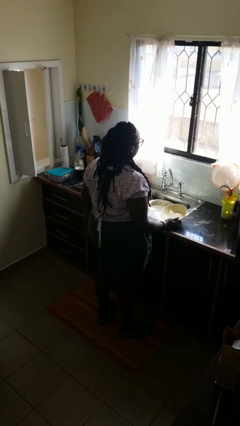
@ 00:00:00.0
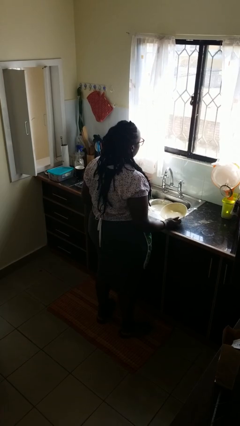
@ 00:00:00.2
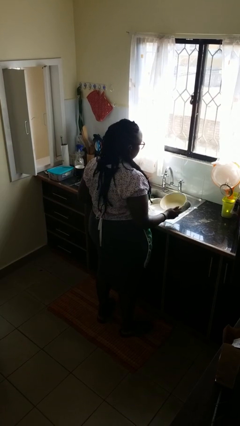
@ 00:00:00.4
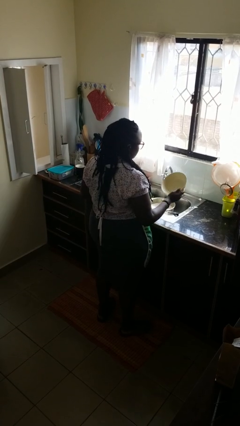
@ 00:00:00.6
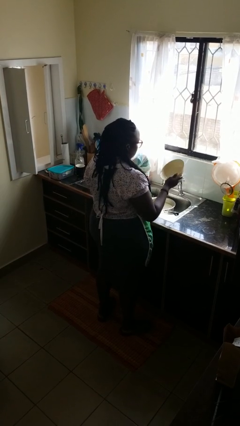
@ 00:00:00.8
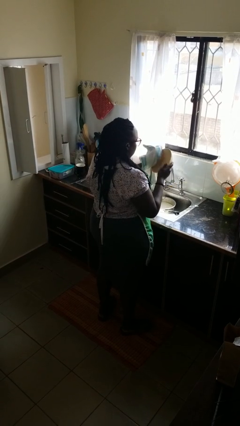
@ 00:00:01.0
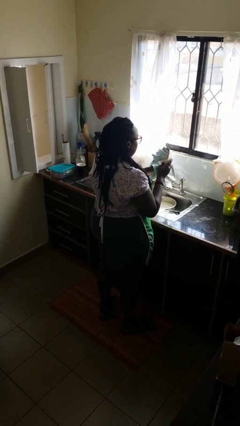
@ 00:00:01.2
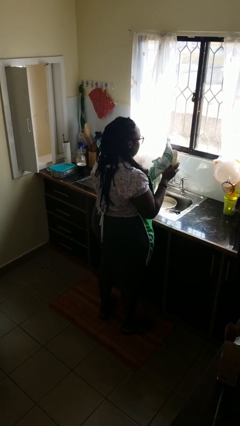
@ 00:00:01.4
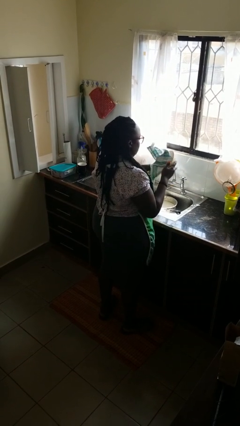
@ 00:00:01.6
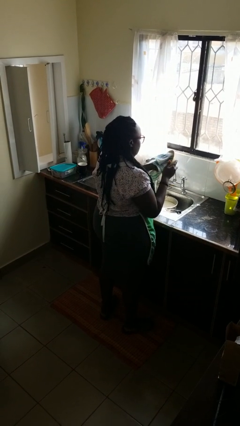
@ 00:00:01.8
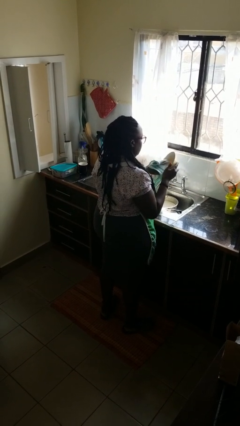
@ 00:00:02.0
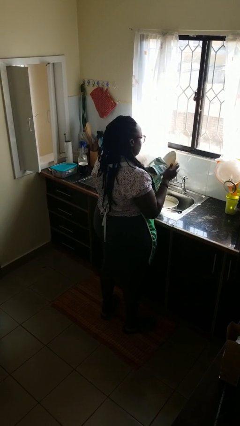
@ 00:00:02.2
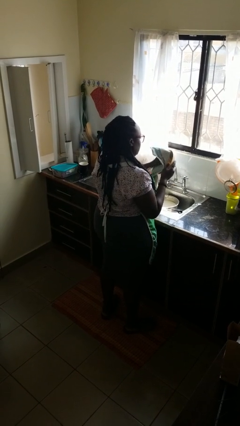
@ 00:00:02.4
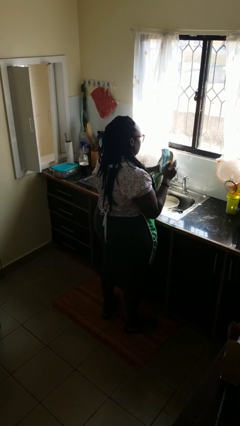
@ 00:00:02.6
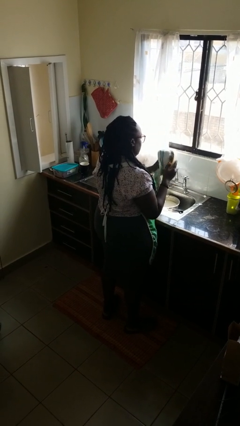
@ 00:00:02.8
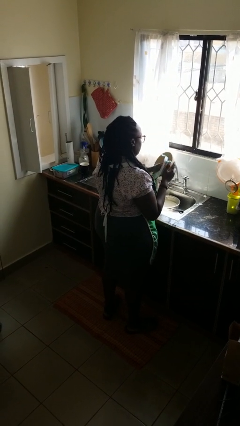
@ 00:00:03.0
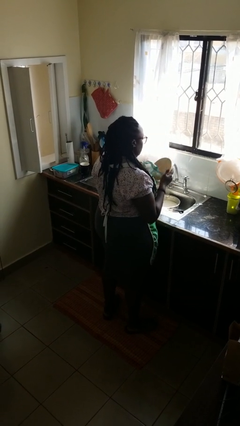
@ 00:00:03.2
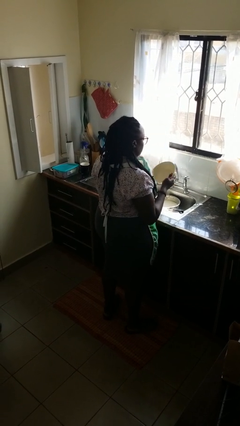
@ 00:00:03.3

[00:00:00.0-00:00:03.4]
person dries dish

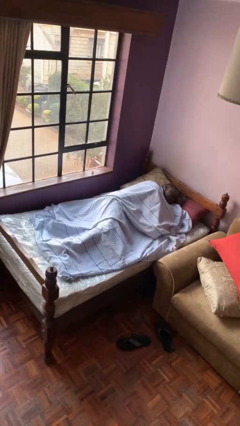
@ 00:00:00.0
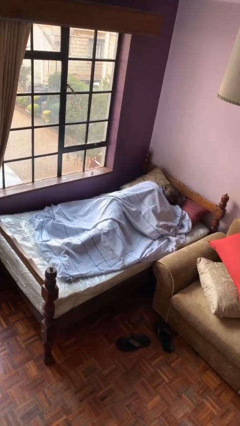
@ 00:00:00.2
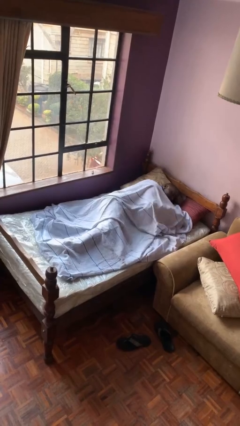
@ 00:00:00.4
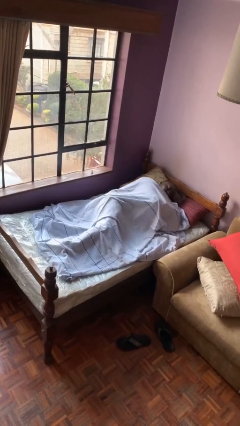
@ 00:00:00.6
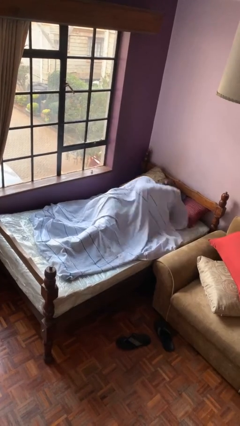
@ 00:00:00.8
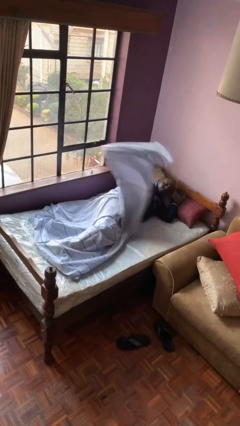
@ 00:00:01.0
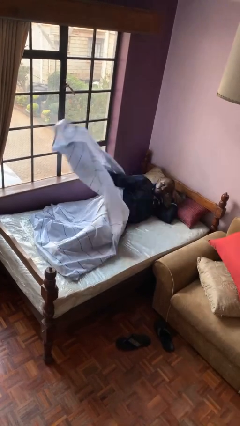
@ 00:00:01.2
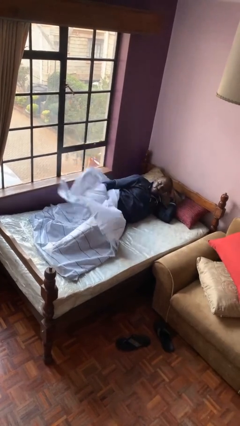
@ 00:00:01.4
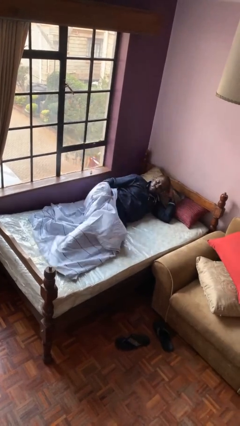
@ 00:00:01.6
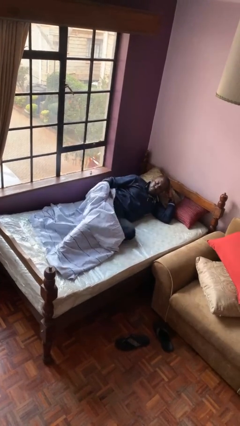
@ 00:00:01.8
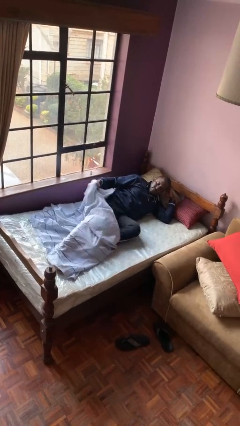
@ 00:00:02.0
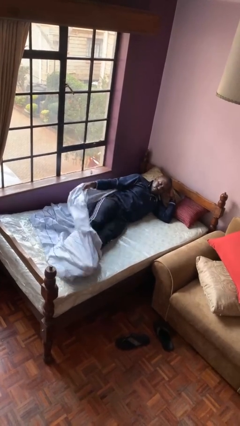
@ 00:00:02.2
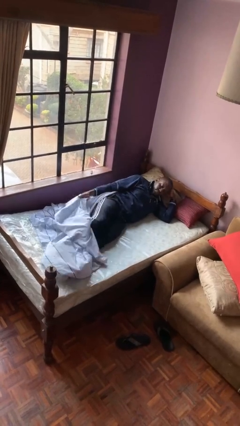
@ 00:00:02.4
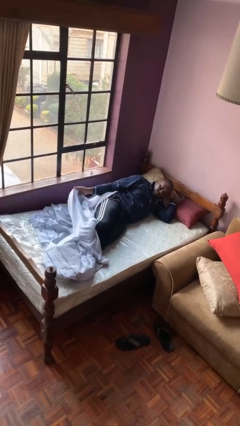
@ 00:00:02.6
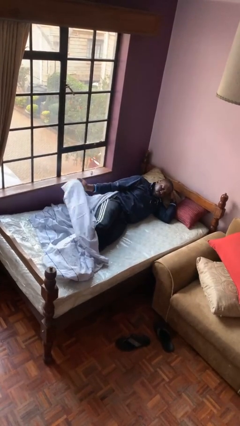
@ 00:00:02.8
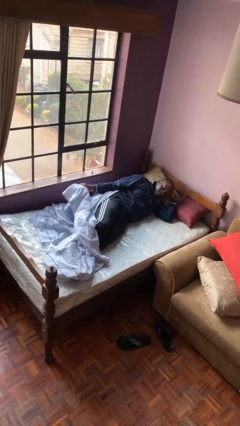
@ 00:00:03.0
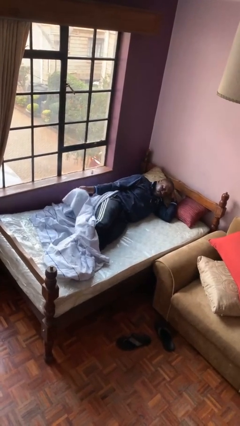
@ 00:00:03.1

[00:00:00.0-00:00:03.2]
person uncovers with bedsheets

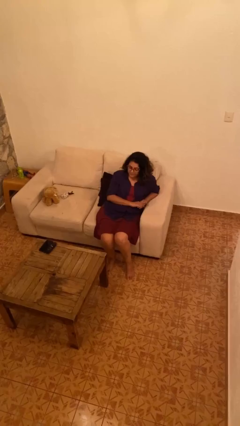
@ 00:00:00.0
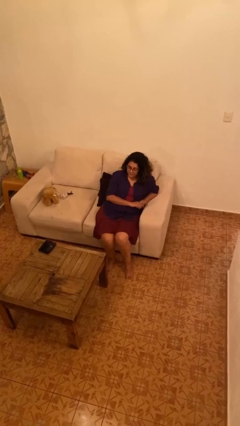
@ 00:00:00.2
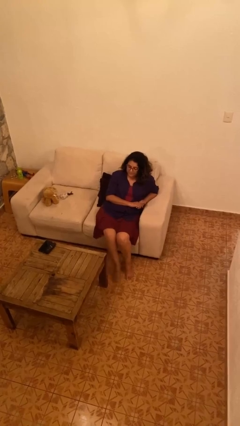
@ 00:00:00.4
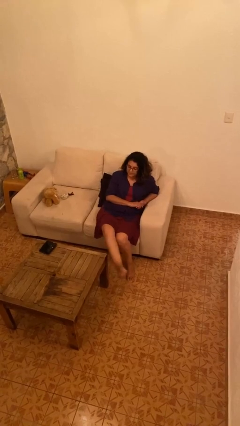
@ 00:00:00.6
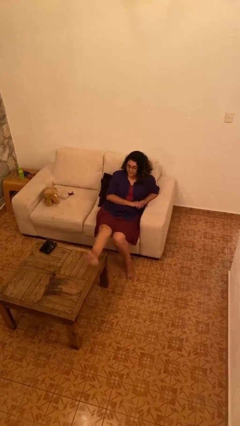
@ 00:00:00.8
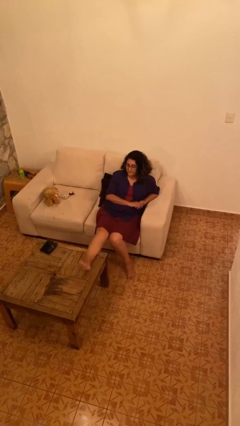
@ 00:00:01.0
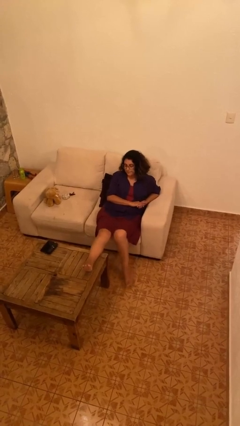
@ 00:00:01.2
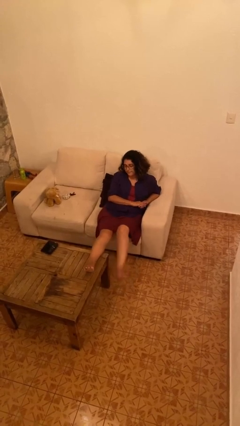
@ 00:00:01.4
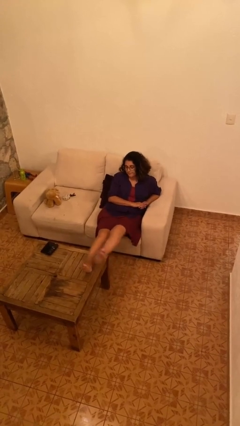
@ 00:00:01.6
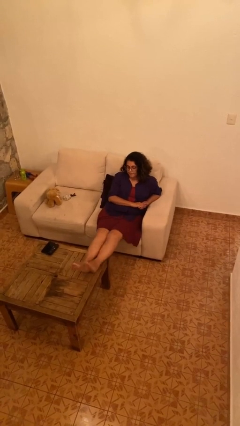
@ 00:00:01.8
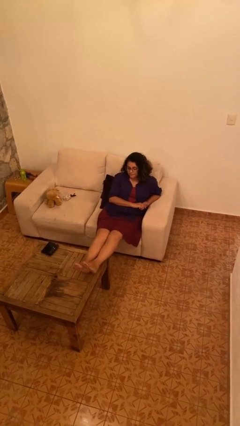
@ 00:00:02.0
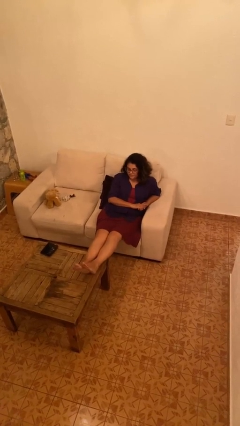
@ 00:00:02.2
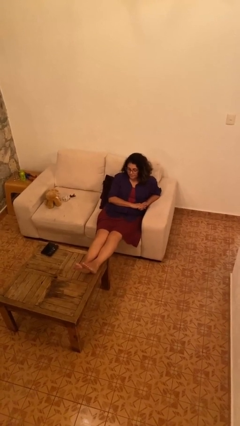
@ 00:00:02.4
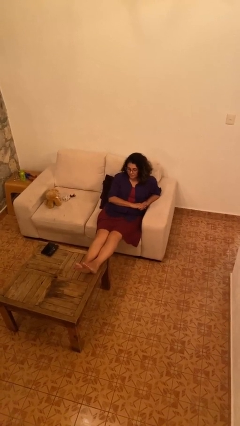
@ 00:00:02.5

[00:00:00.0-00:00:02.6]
person puts feet up

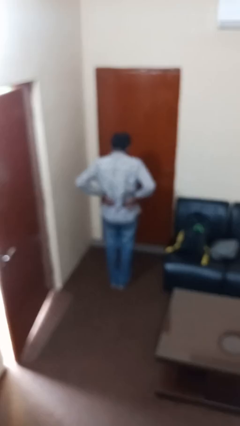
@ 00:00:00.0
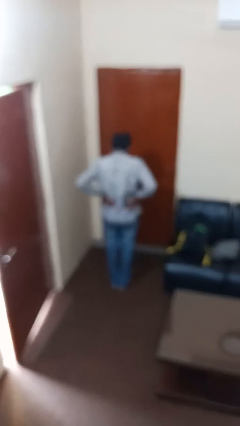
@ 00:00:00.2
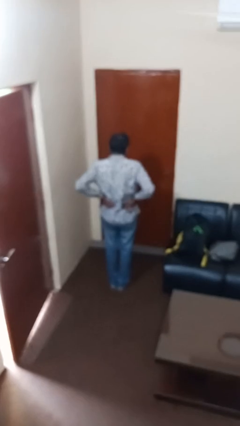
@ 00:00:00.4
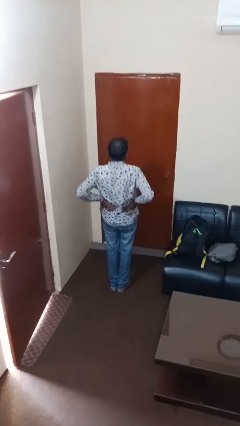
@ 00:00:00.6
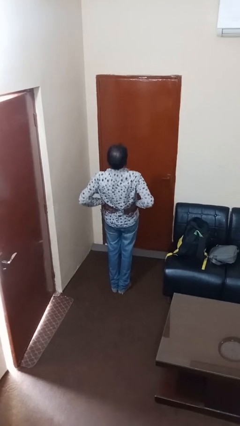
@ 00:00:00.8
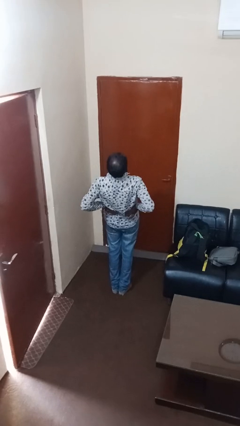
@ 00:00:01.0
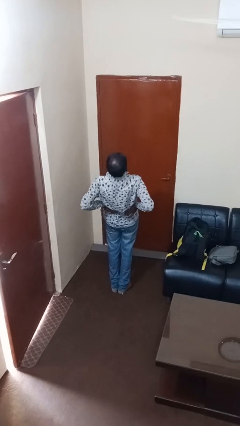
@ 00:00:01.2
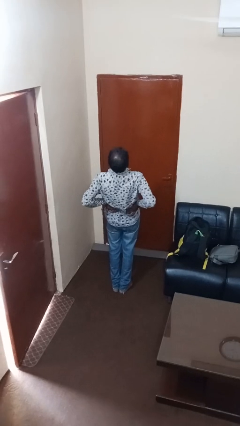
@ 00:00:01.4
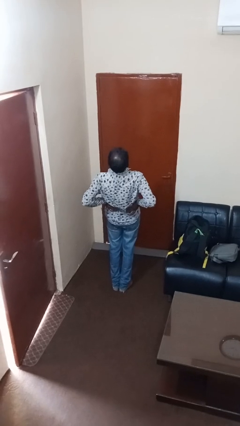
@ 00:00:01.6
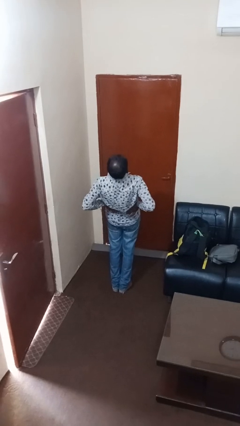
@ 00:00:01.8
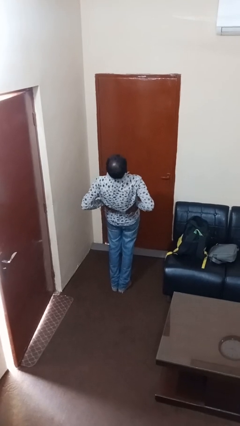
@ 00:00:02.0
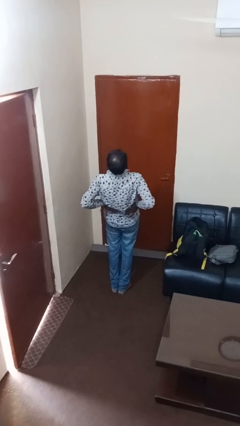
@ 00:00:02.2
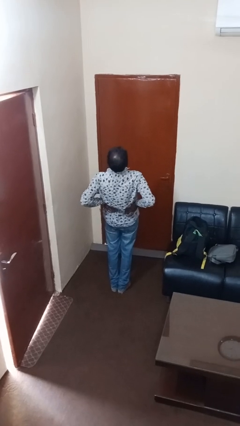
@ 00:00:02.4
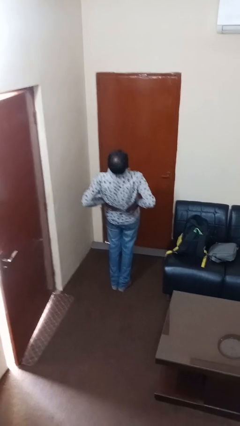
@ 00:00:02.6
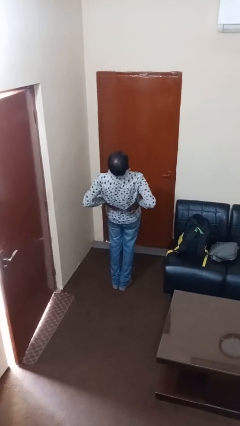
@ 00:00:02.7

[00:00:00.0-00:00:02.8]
person stretches back

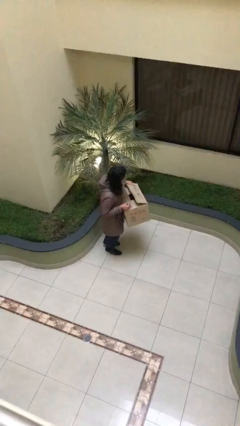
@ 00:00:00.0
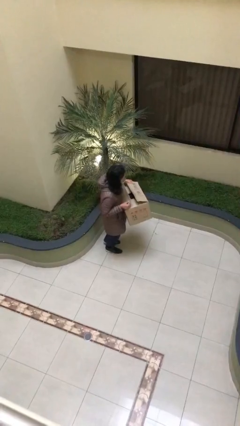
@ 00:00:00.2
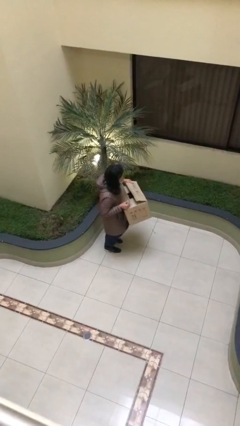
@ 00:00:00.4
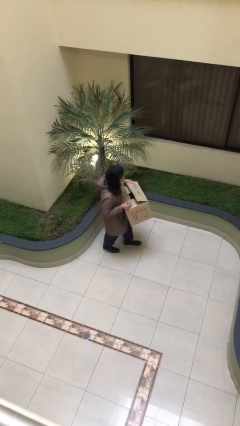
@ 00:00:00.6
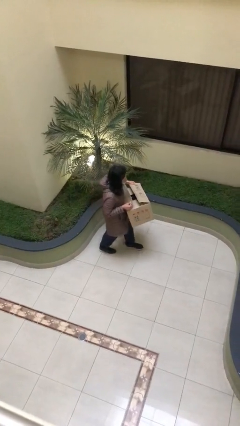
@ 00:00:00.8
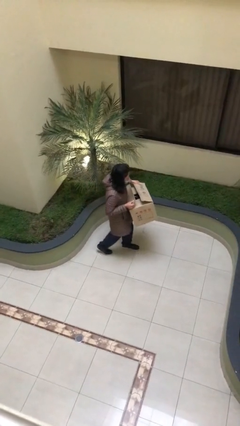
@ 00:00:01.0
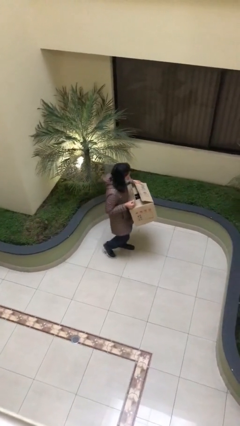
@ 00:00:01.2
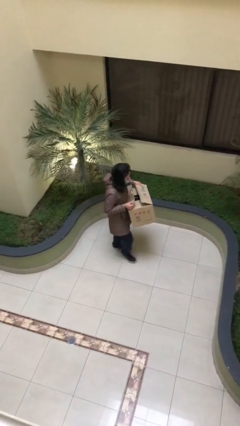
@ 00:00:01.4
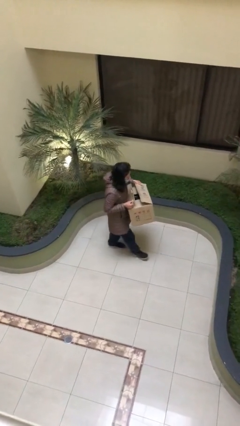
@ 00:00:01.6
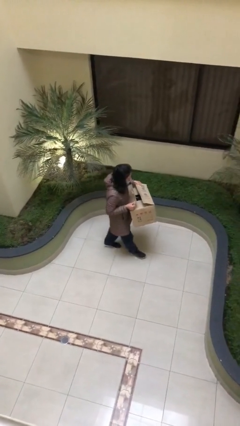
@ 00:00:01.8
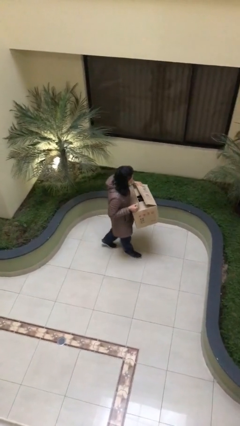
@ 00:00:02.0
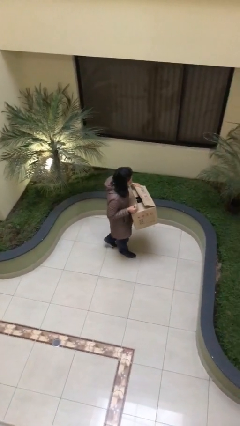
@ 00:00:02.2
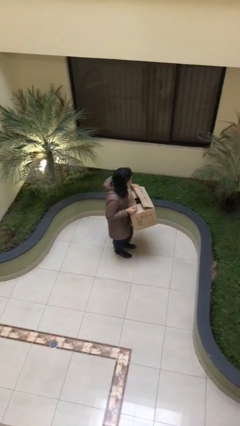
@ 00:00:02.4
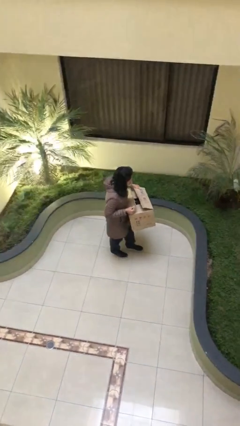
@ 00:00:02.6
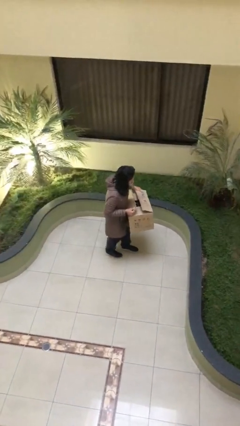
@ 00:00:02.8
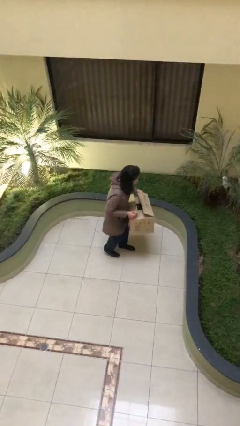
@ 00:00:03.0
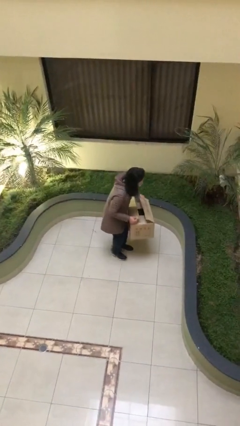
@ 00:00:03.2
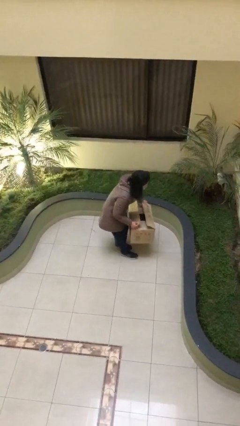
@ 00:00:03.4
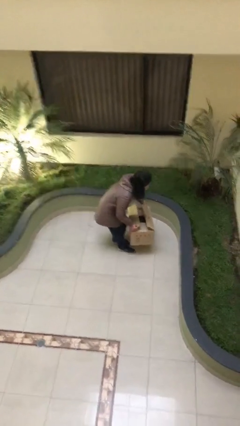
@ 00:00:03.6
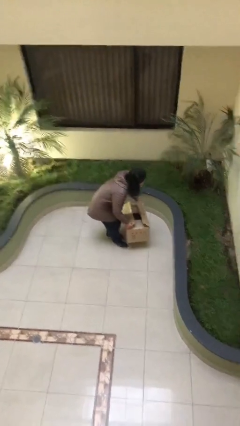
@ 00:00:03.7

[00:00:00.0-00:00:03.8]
person carries heavy object

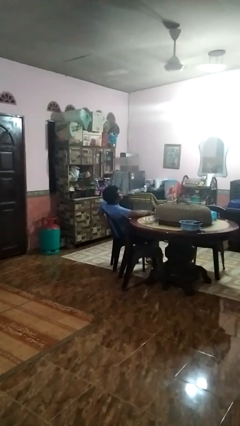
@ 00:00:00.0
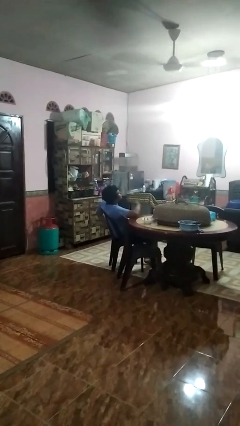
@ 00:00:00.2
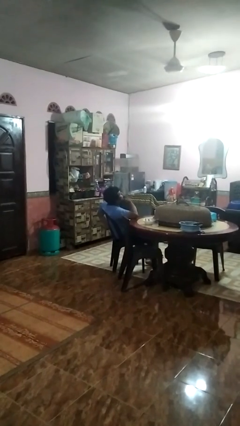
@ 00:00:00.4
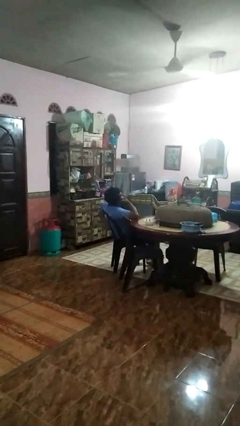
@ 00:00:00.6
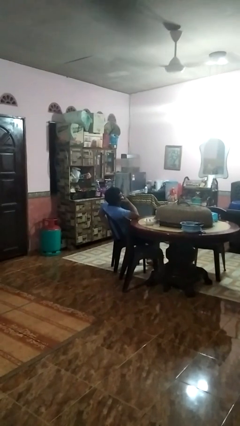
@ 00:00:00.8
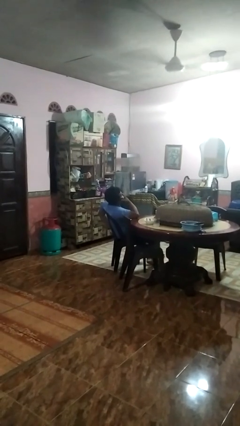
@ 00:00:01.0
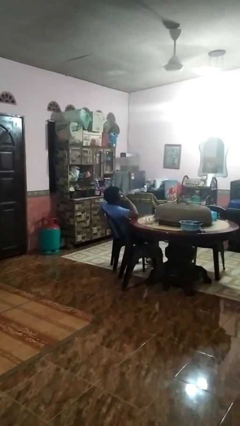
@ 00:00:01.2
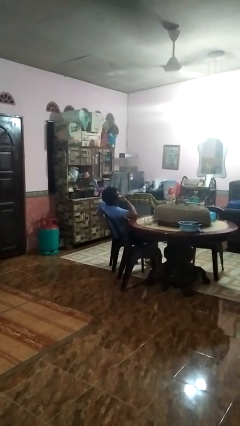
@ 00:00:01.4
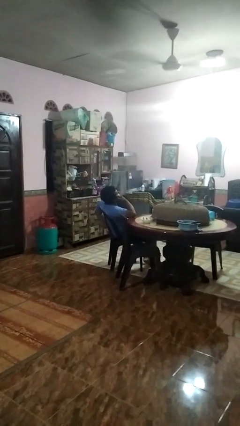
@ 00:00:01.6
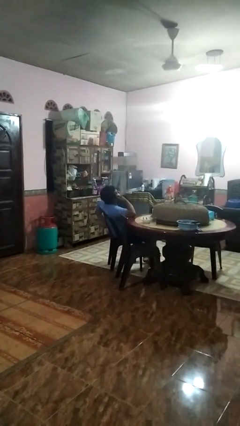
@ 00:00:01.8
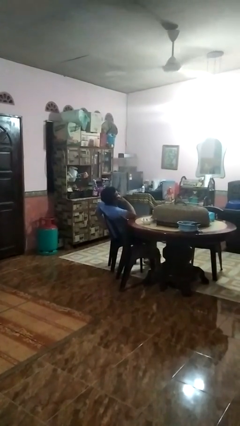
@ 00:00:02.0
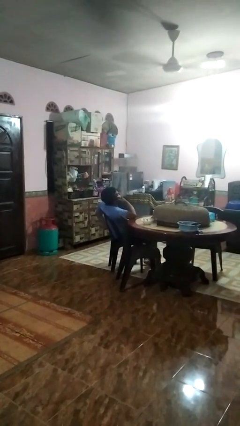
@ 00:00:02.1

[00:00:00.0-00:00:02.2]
person strokes chin
